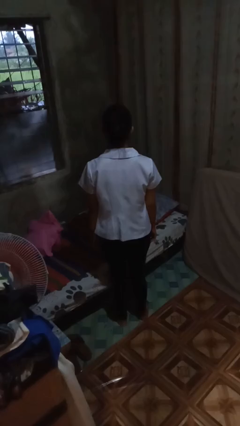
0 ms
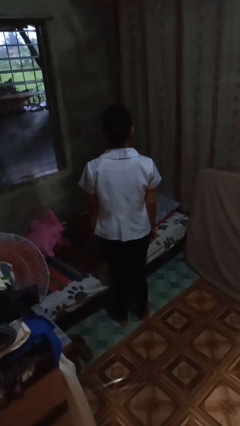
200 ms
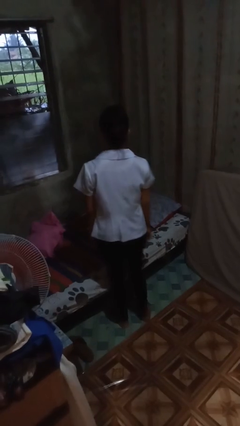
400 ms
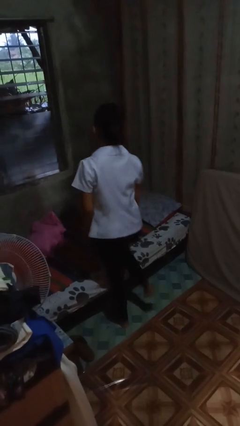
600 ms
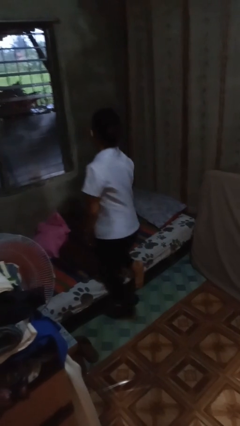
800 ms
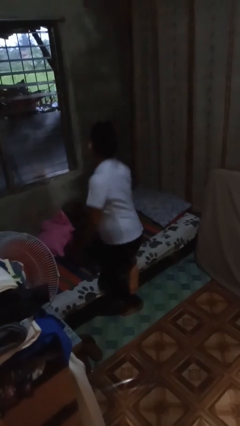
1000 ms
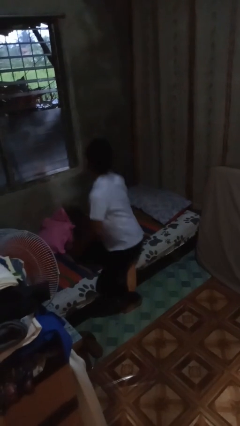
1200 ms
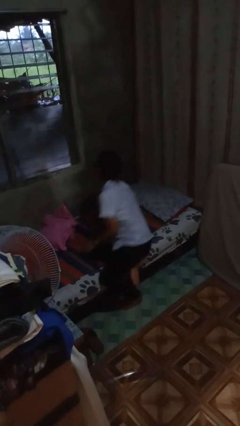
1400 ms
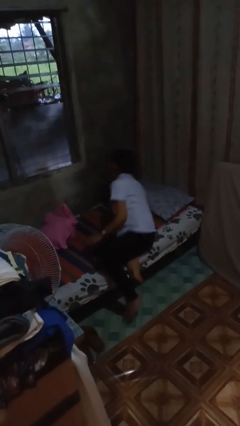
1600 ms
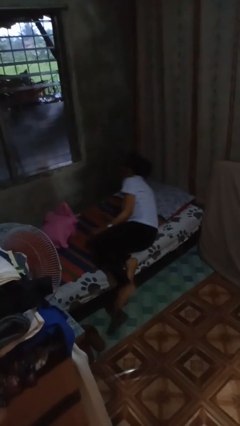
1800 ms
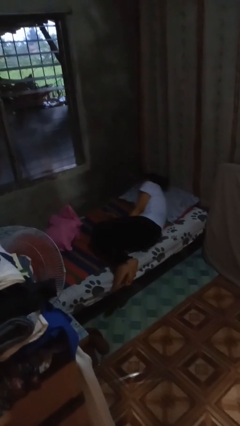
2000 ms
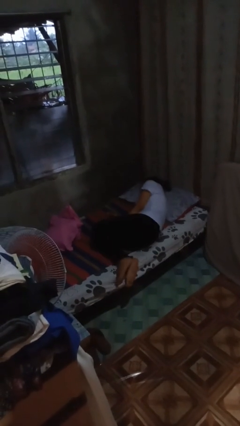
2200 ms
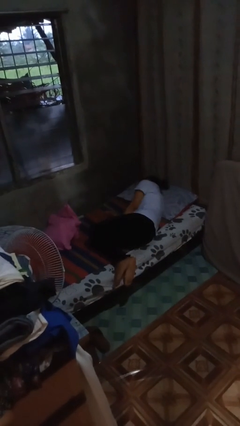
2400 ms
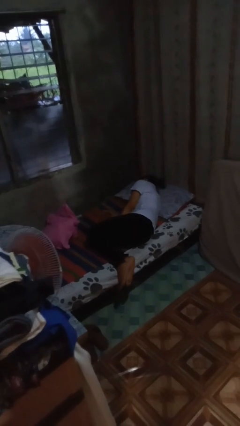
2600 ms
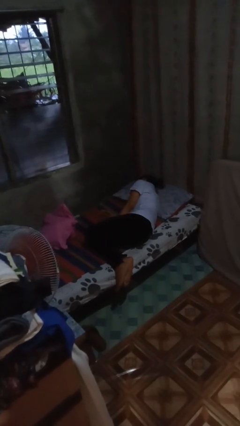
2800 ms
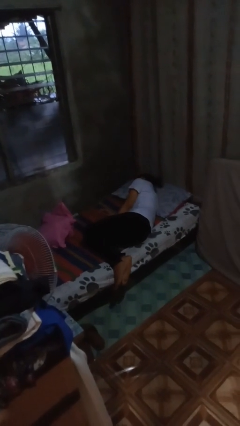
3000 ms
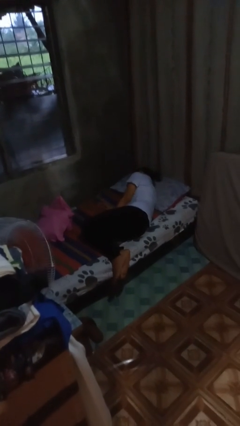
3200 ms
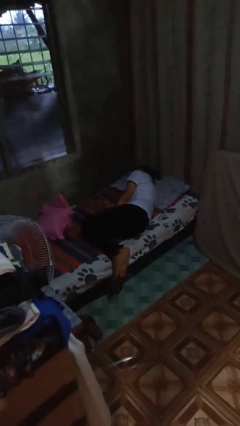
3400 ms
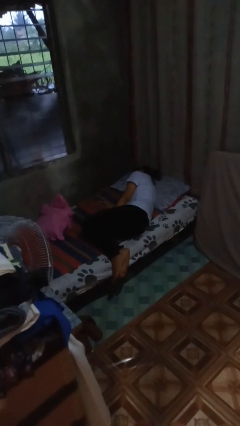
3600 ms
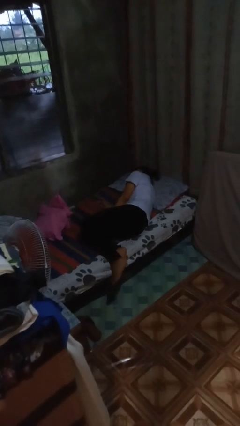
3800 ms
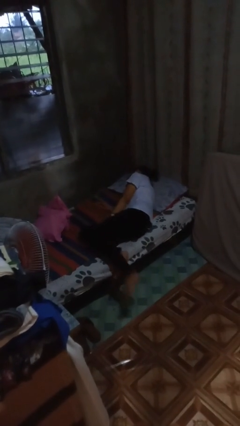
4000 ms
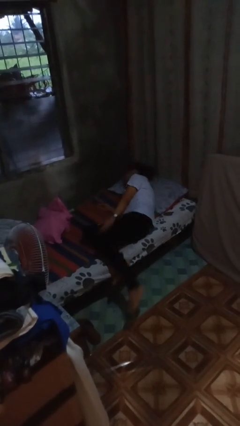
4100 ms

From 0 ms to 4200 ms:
person lies down on bed

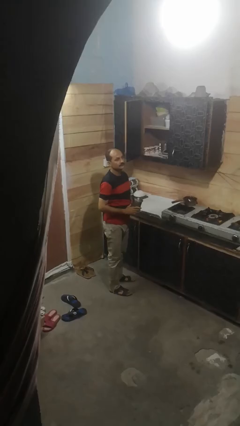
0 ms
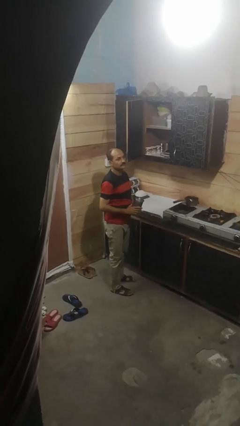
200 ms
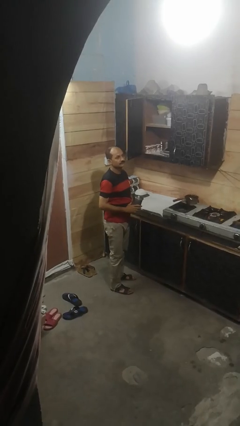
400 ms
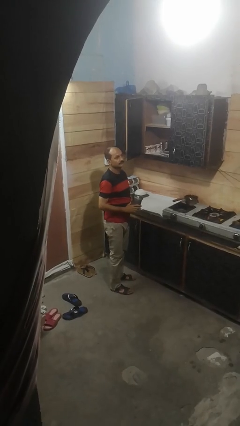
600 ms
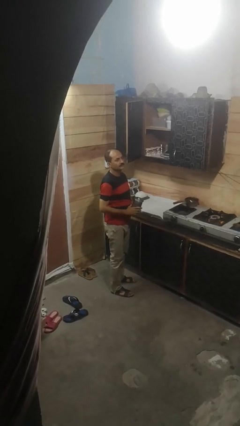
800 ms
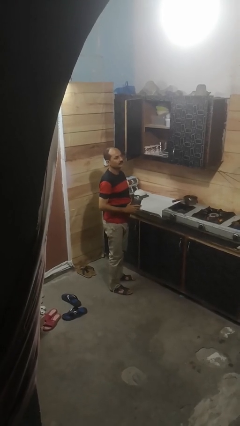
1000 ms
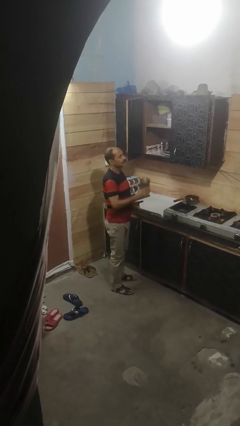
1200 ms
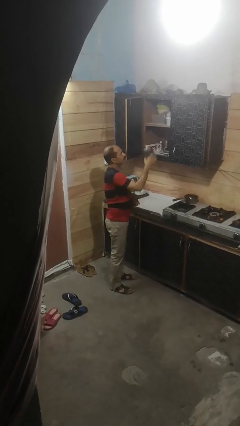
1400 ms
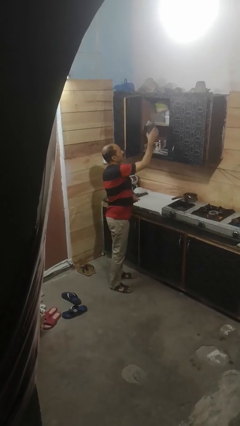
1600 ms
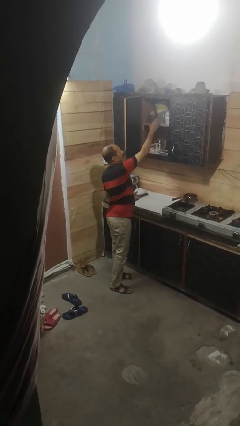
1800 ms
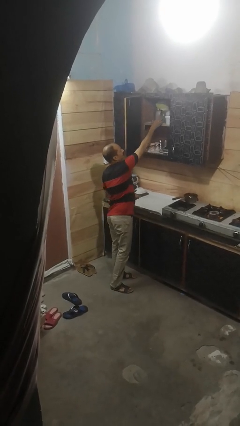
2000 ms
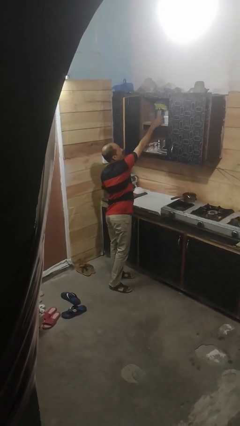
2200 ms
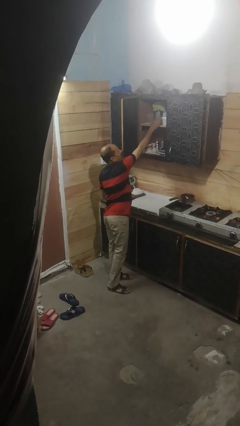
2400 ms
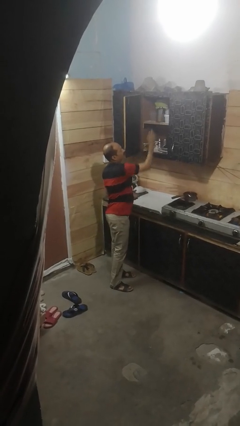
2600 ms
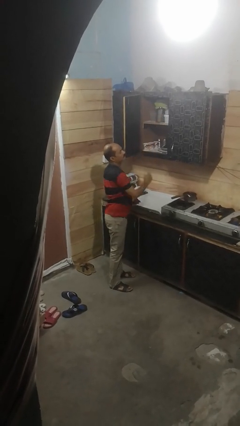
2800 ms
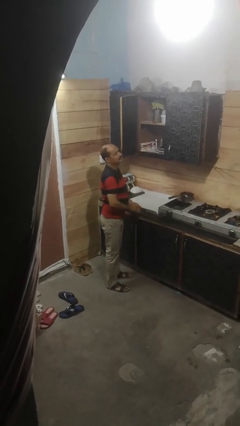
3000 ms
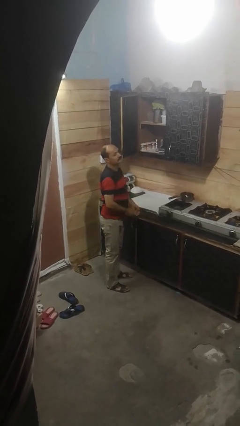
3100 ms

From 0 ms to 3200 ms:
person puts down object into cabinet

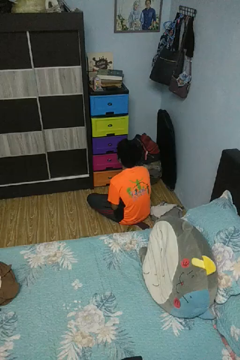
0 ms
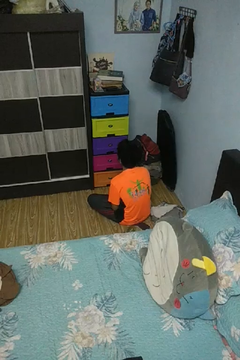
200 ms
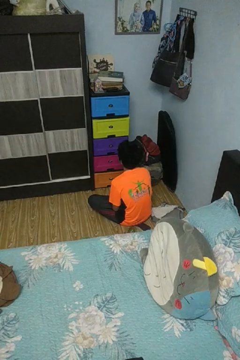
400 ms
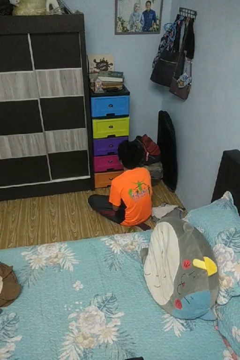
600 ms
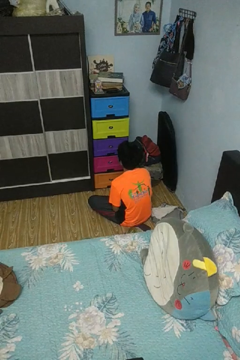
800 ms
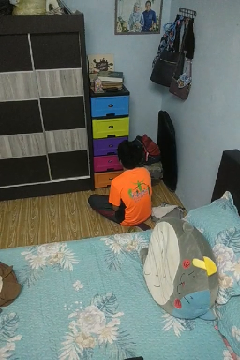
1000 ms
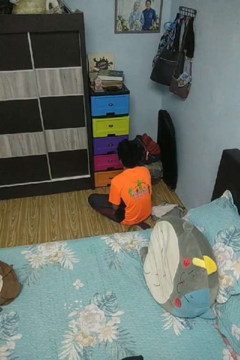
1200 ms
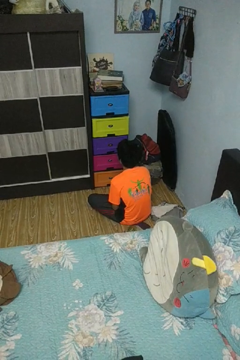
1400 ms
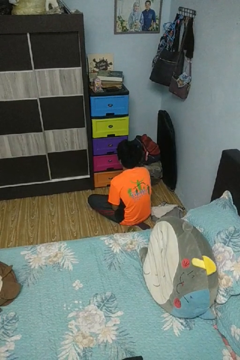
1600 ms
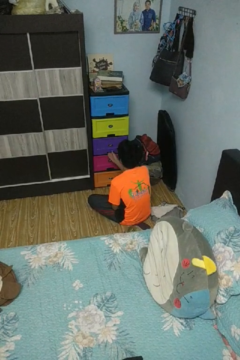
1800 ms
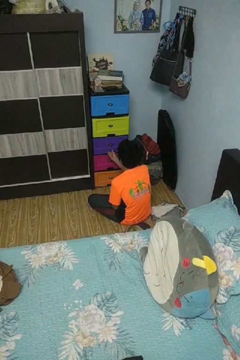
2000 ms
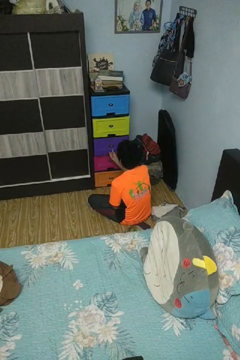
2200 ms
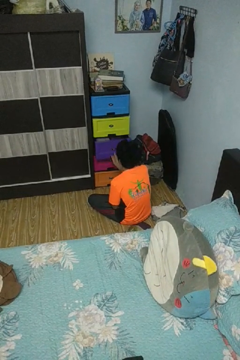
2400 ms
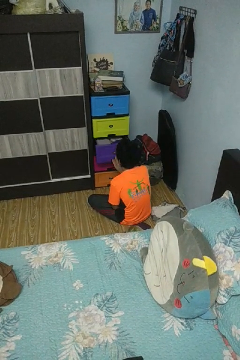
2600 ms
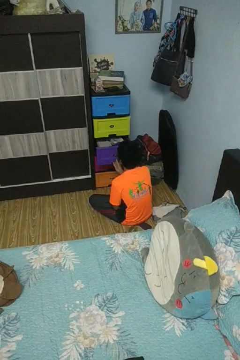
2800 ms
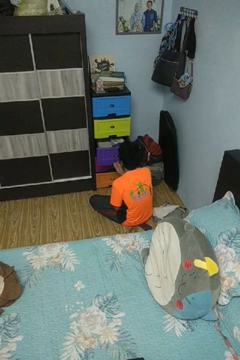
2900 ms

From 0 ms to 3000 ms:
person opens dresser drawer

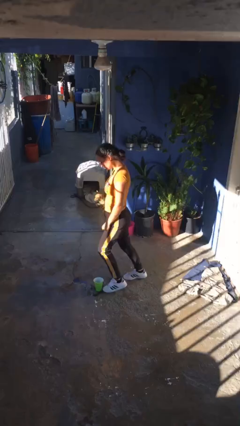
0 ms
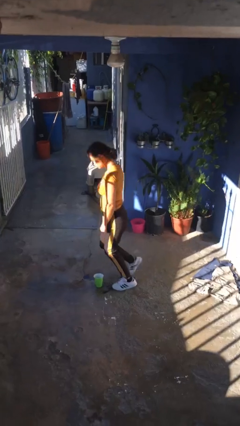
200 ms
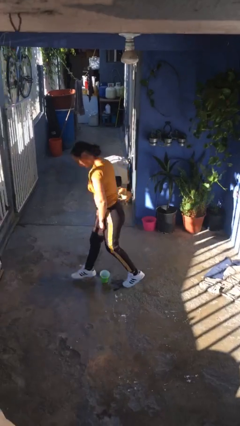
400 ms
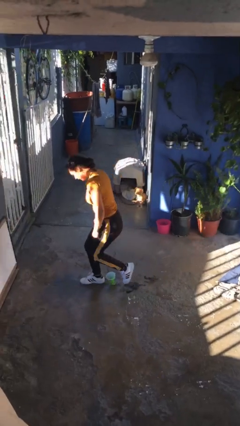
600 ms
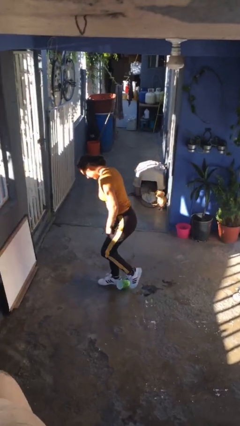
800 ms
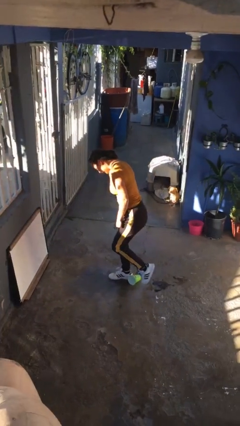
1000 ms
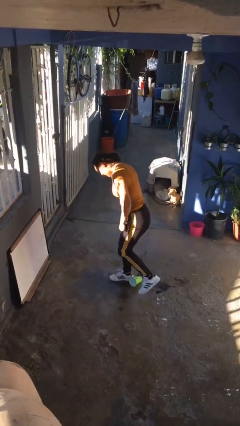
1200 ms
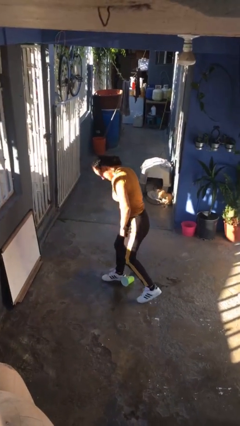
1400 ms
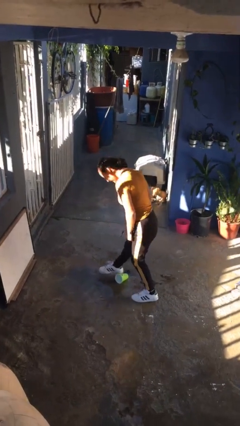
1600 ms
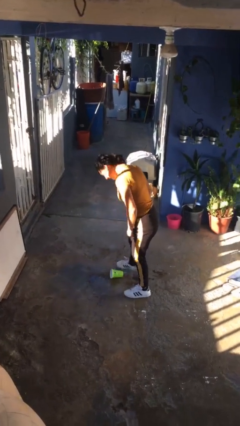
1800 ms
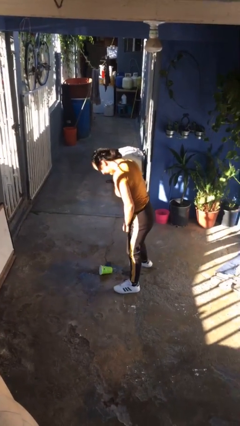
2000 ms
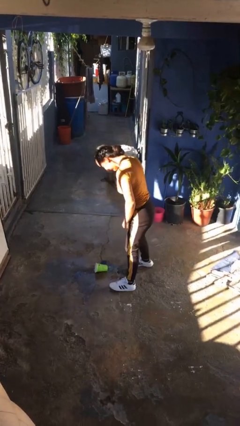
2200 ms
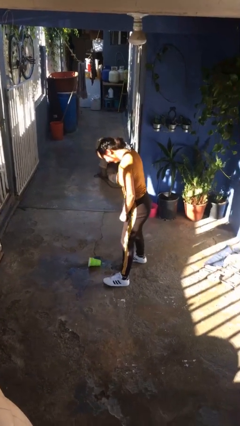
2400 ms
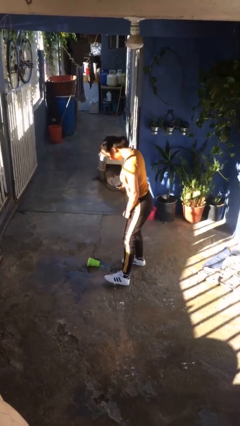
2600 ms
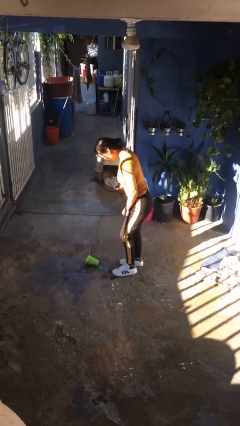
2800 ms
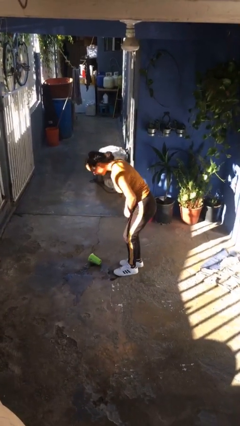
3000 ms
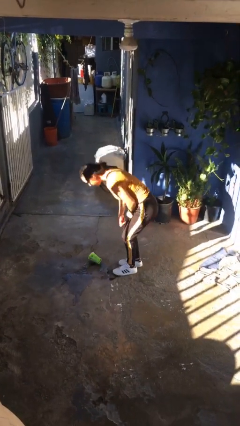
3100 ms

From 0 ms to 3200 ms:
person spills on floor

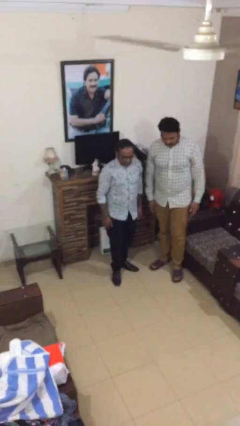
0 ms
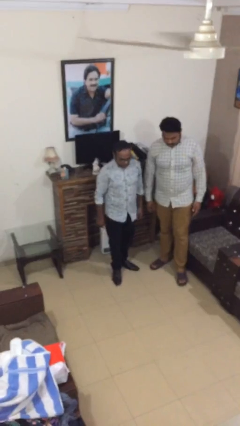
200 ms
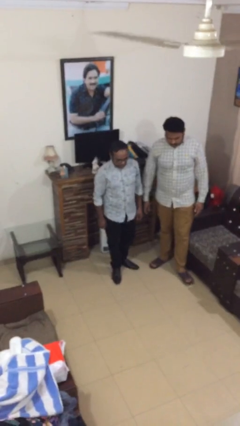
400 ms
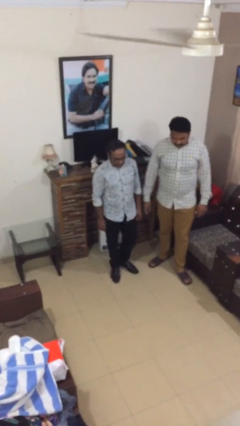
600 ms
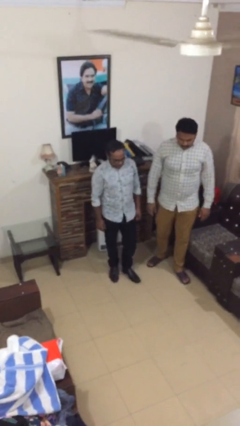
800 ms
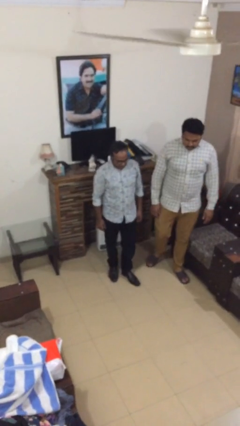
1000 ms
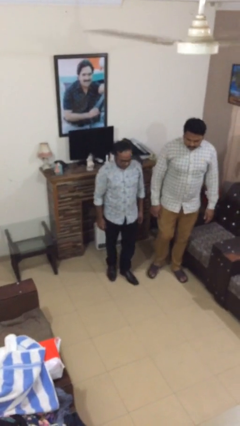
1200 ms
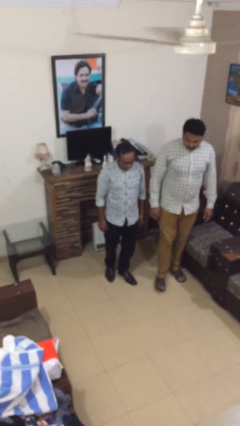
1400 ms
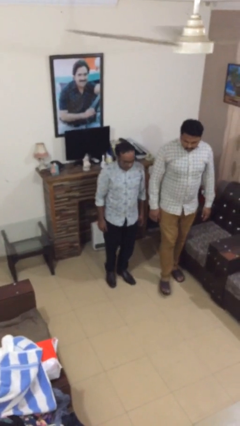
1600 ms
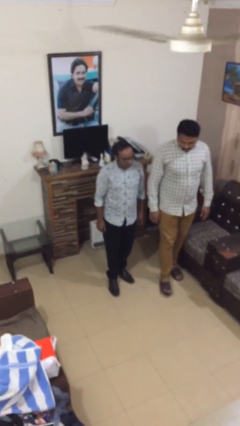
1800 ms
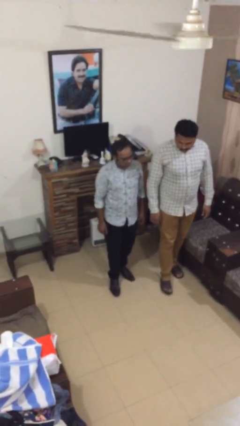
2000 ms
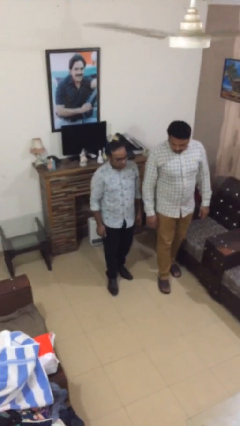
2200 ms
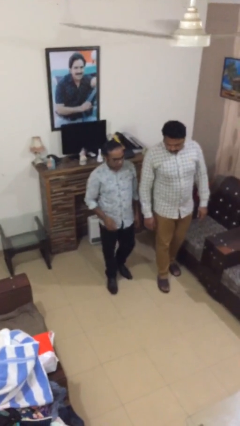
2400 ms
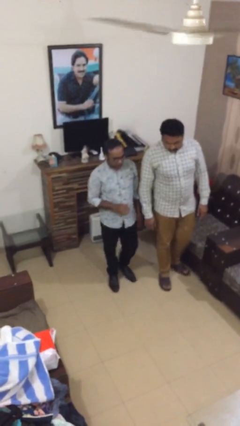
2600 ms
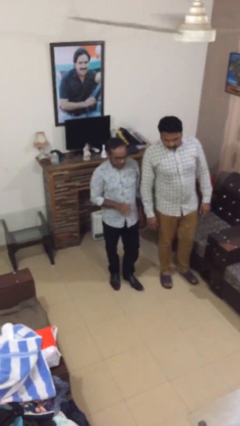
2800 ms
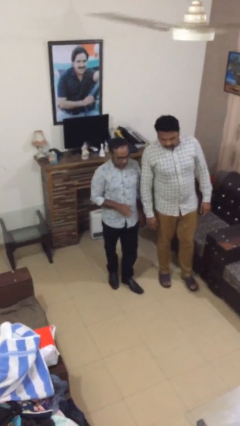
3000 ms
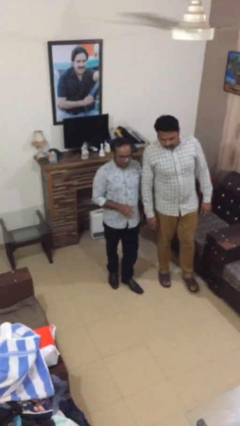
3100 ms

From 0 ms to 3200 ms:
person talks to person

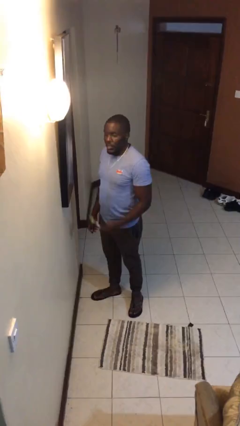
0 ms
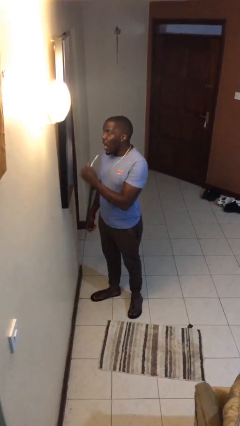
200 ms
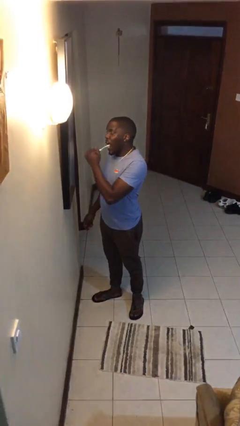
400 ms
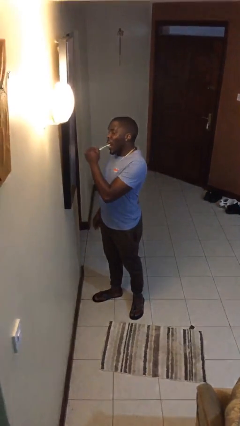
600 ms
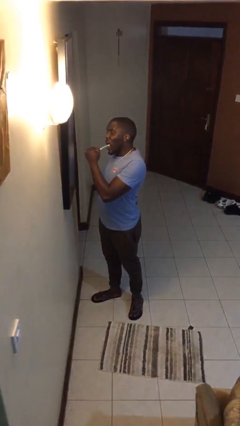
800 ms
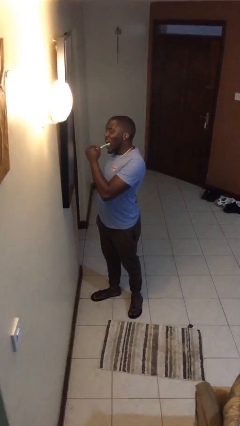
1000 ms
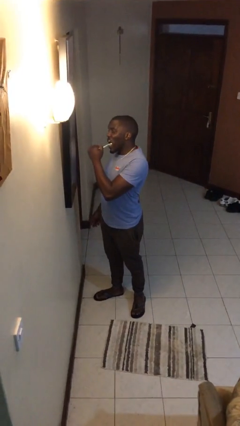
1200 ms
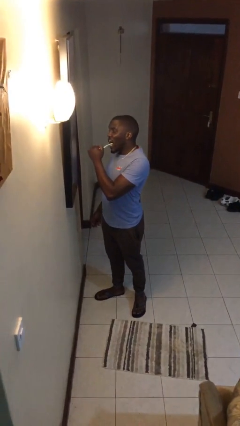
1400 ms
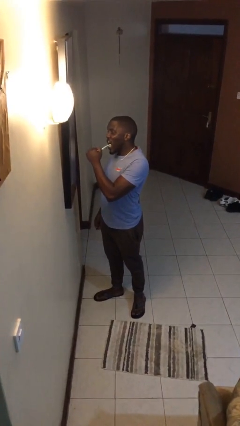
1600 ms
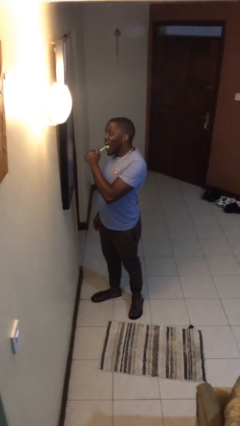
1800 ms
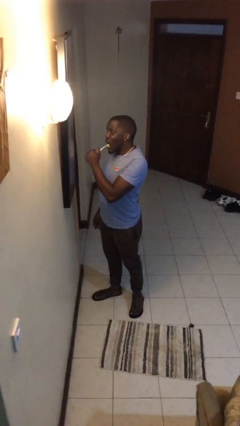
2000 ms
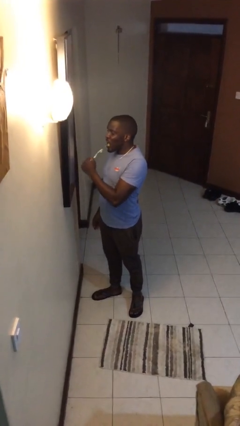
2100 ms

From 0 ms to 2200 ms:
person brushes teeth
